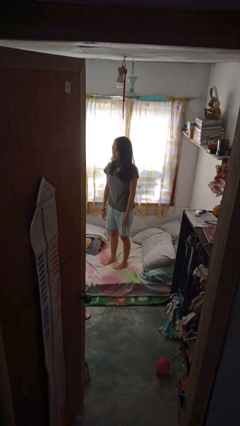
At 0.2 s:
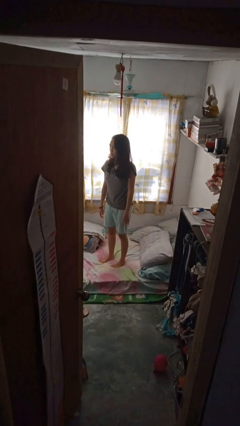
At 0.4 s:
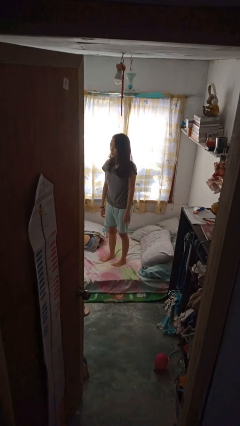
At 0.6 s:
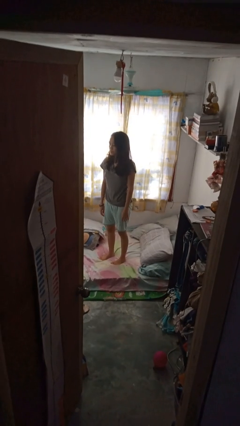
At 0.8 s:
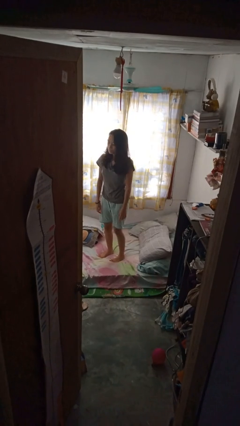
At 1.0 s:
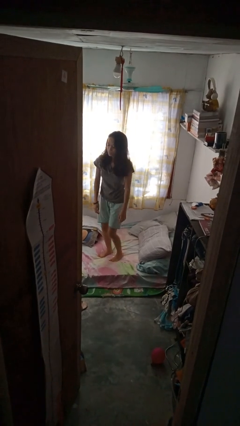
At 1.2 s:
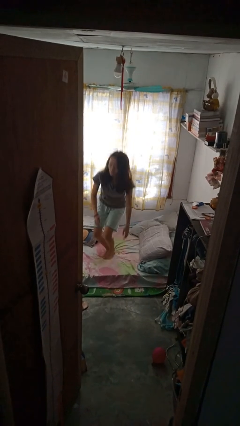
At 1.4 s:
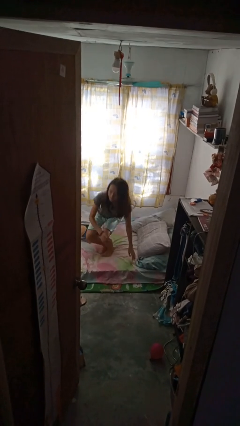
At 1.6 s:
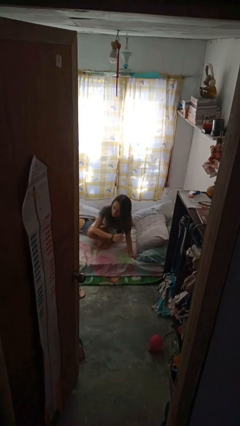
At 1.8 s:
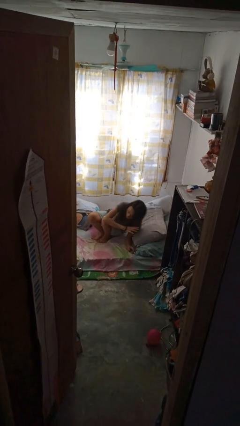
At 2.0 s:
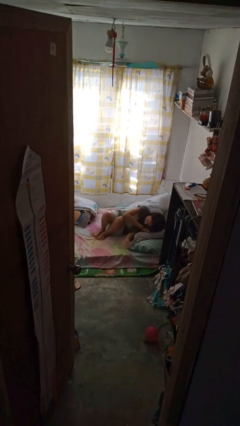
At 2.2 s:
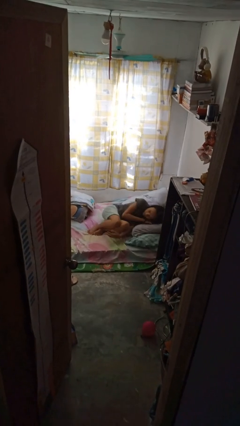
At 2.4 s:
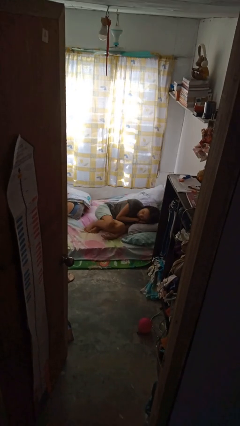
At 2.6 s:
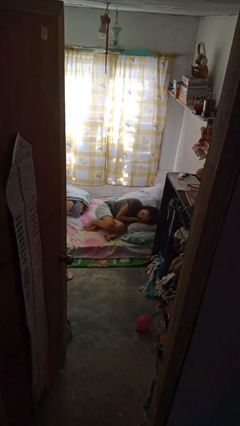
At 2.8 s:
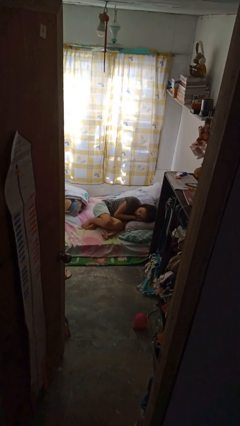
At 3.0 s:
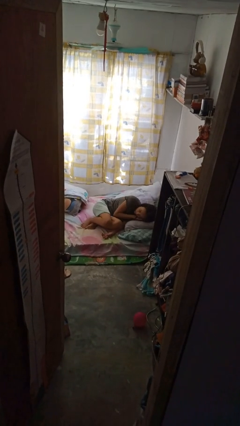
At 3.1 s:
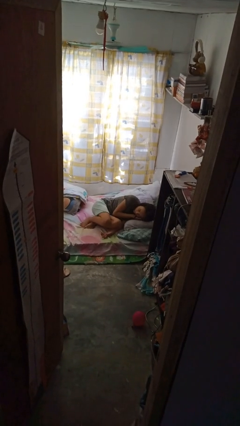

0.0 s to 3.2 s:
person lies down on bed

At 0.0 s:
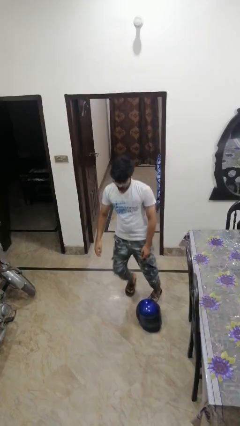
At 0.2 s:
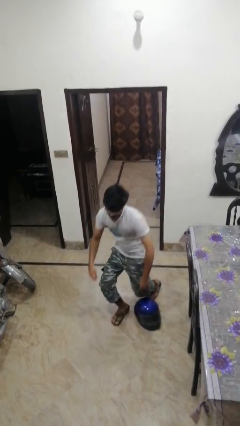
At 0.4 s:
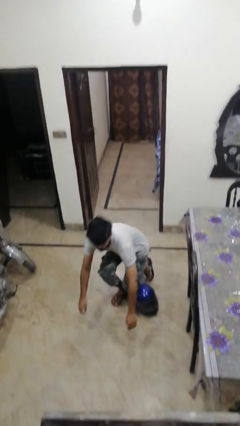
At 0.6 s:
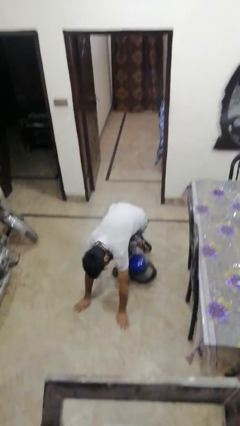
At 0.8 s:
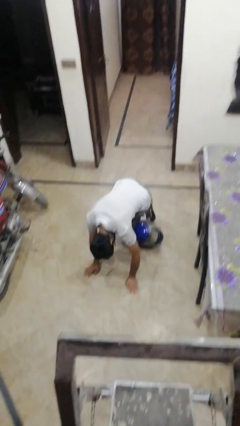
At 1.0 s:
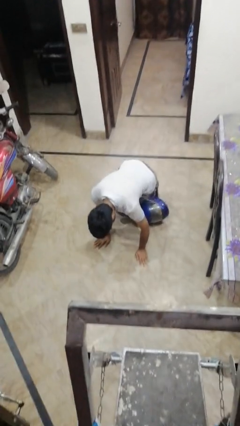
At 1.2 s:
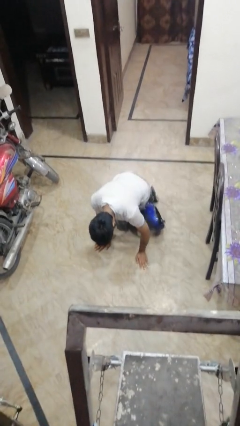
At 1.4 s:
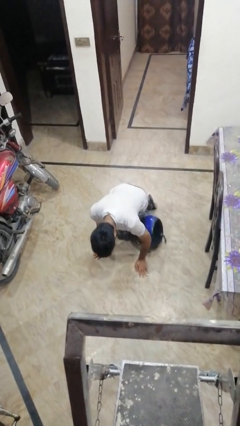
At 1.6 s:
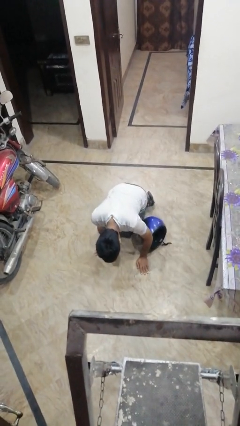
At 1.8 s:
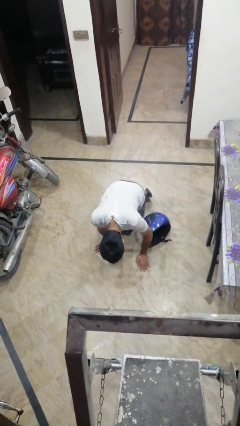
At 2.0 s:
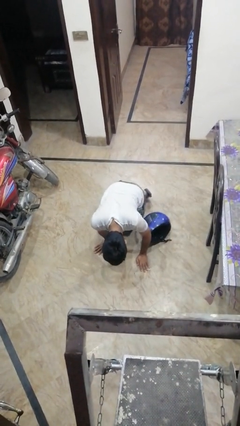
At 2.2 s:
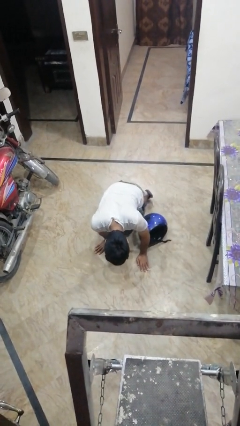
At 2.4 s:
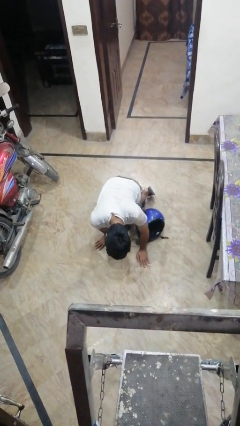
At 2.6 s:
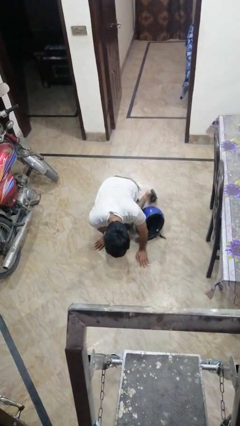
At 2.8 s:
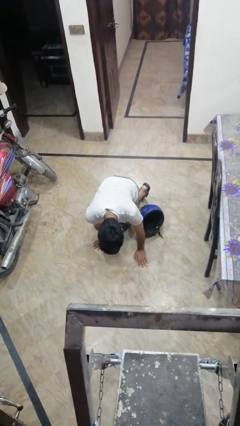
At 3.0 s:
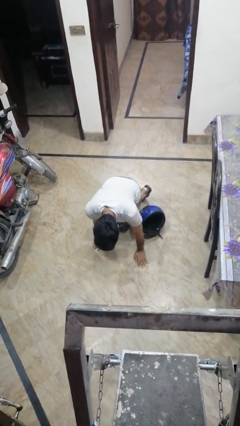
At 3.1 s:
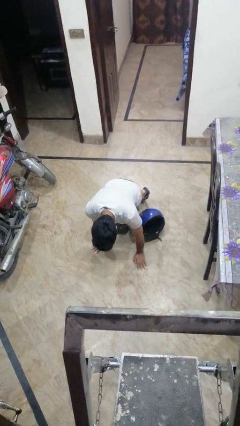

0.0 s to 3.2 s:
person trips on object on floor

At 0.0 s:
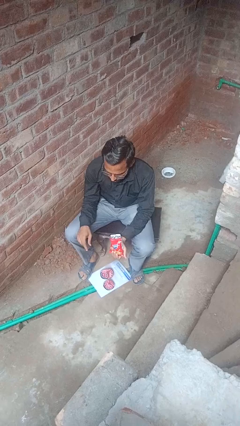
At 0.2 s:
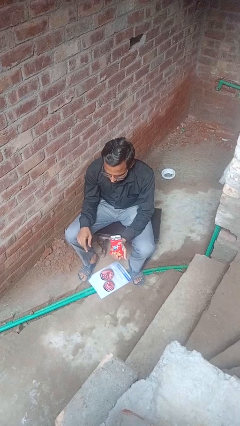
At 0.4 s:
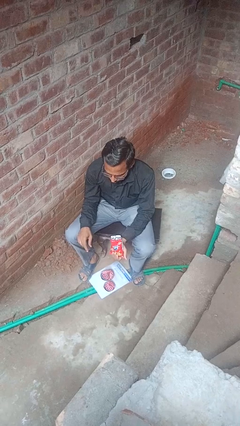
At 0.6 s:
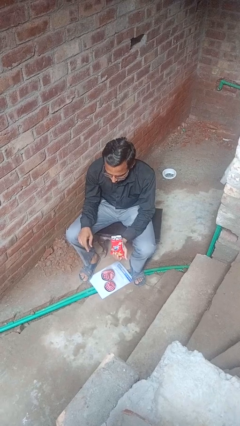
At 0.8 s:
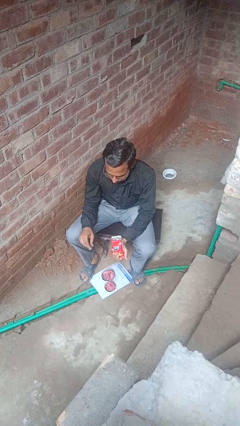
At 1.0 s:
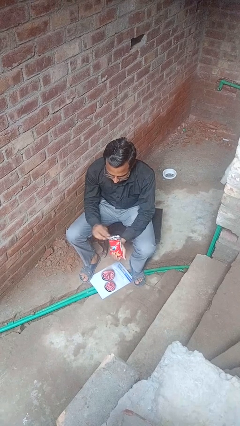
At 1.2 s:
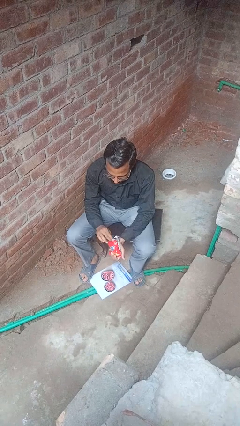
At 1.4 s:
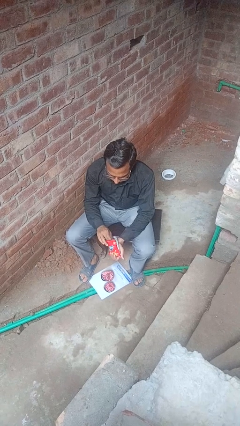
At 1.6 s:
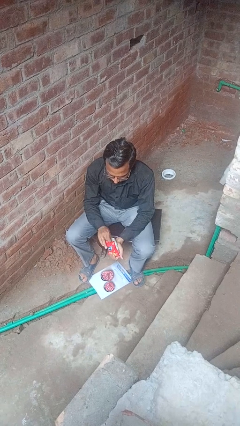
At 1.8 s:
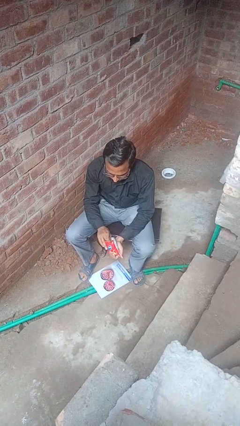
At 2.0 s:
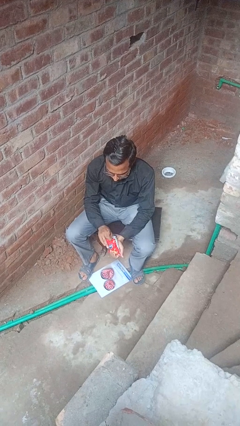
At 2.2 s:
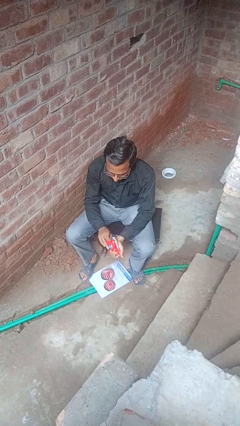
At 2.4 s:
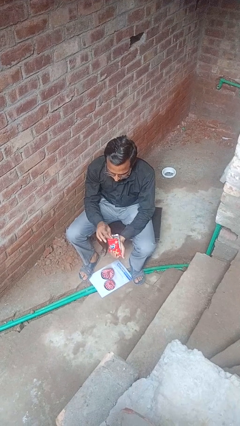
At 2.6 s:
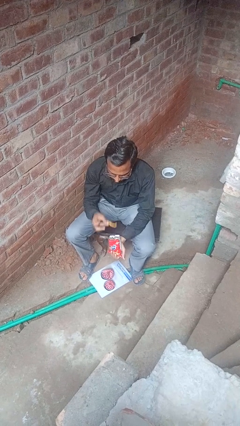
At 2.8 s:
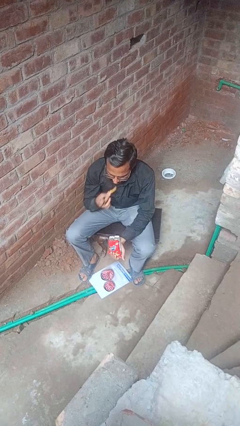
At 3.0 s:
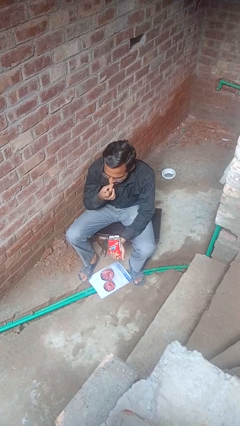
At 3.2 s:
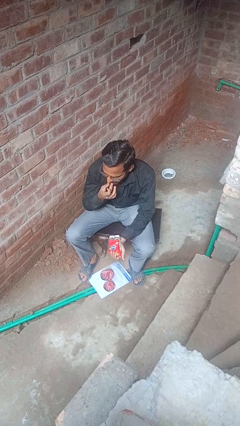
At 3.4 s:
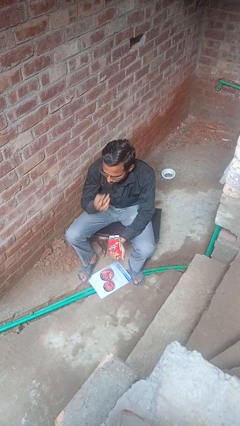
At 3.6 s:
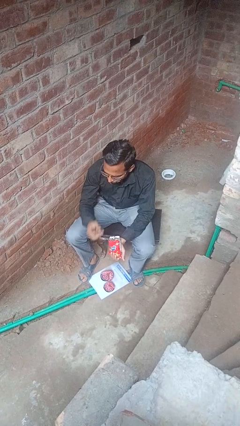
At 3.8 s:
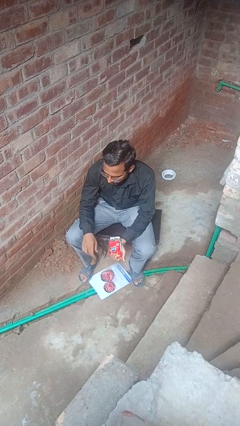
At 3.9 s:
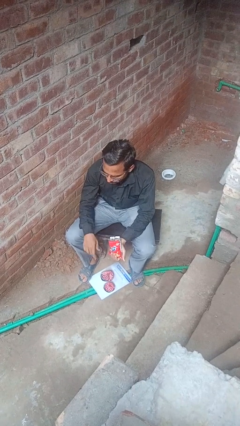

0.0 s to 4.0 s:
person eats snack from bag

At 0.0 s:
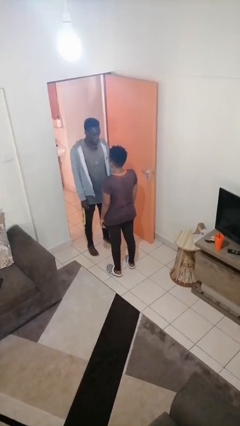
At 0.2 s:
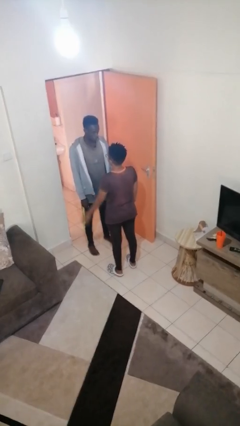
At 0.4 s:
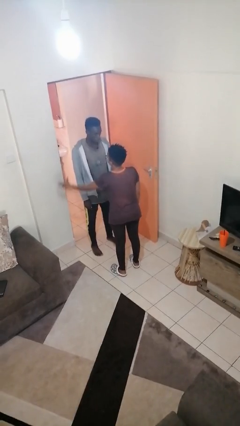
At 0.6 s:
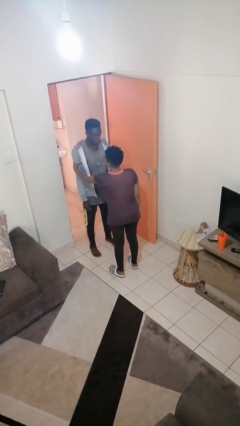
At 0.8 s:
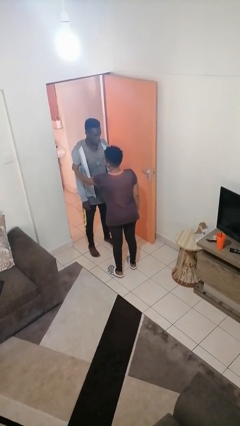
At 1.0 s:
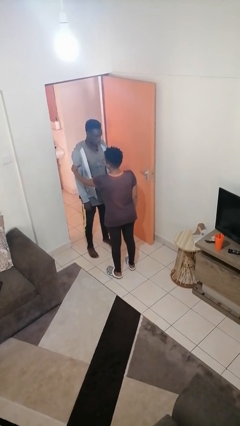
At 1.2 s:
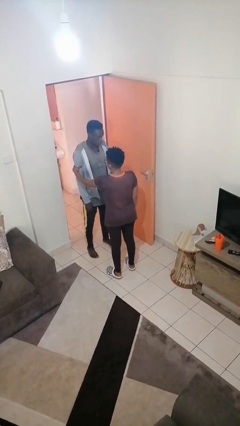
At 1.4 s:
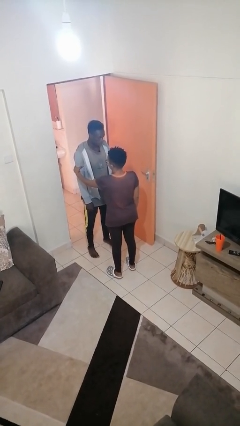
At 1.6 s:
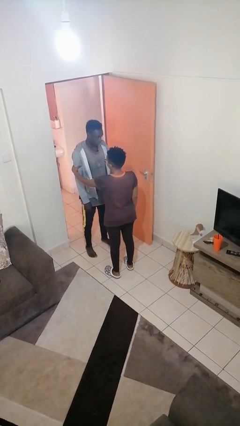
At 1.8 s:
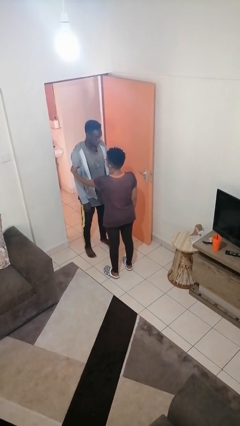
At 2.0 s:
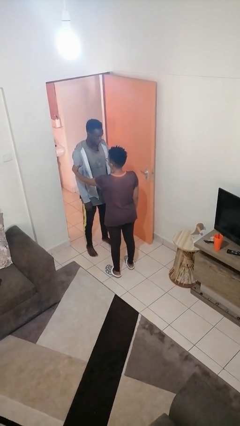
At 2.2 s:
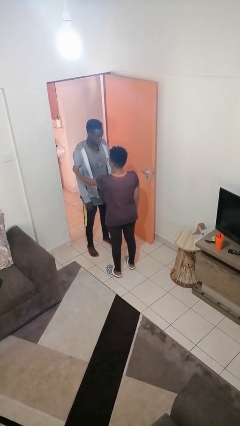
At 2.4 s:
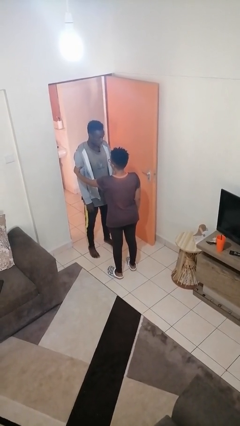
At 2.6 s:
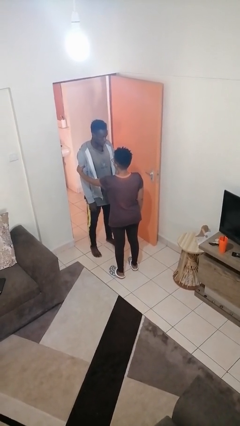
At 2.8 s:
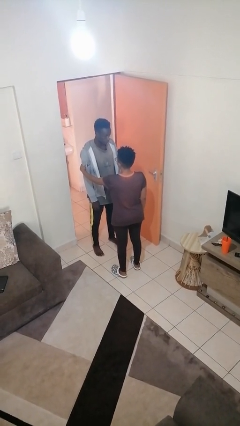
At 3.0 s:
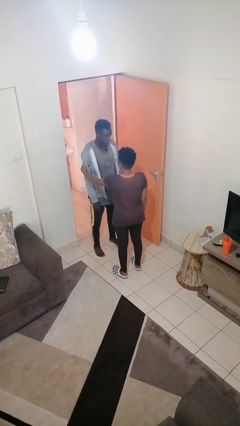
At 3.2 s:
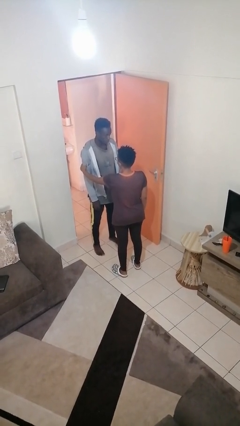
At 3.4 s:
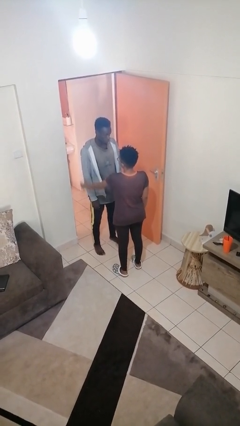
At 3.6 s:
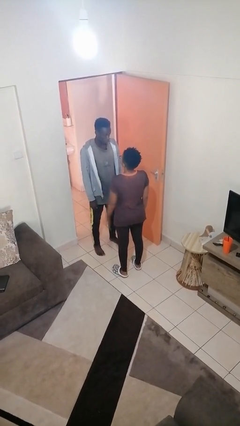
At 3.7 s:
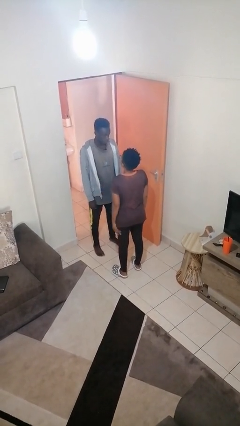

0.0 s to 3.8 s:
person grabs person by bicep

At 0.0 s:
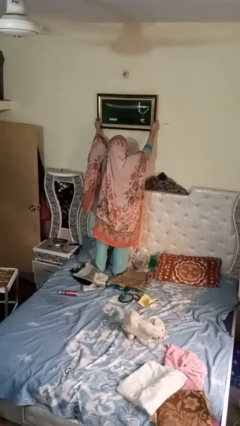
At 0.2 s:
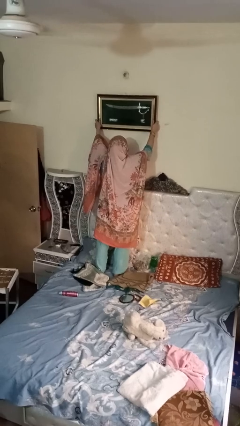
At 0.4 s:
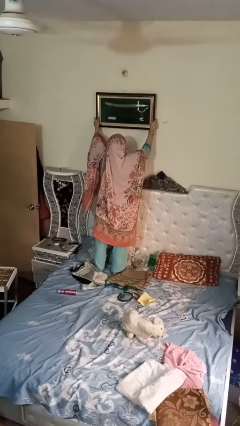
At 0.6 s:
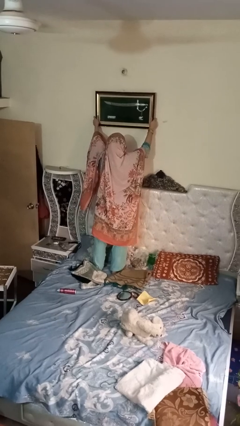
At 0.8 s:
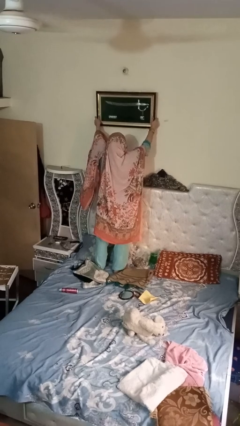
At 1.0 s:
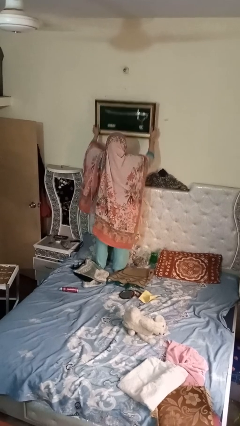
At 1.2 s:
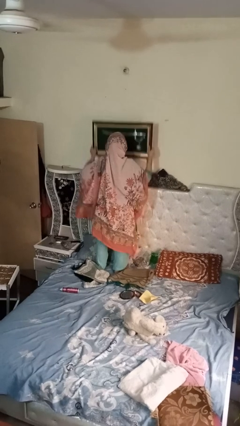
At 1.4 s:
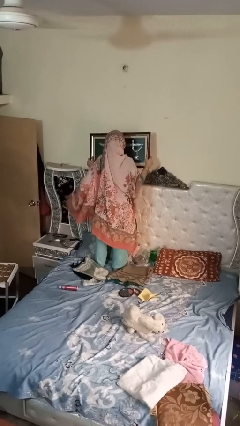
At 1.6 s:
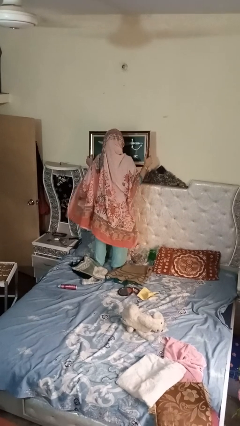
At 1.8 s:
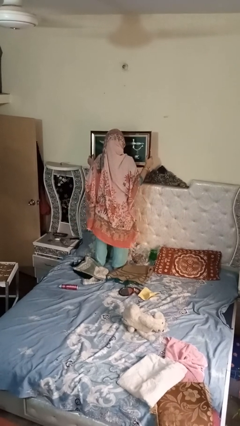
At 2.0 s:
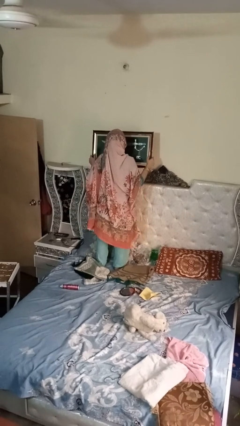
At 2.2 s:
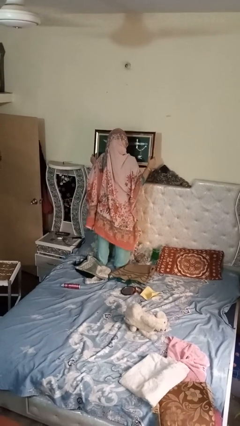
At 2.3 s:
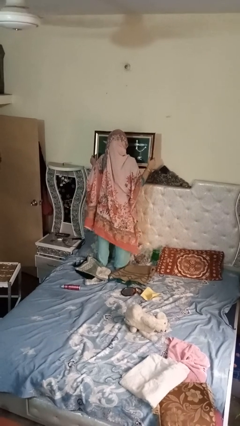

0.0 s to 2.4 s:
person puts up picture frame

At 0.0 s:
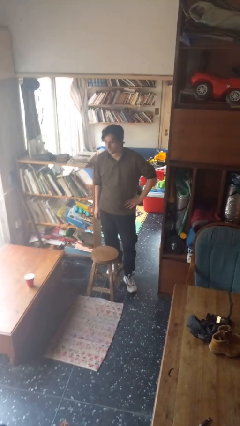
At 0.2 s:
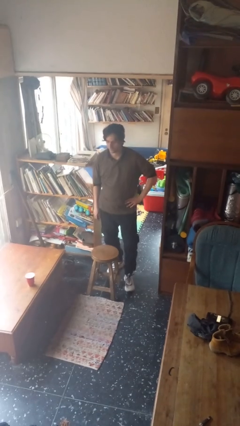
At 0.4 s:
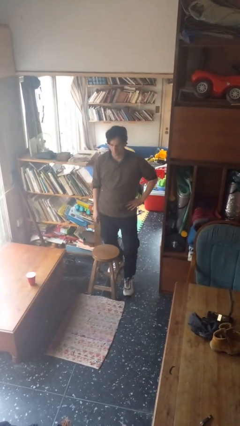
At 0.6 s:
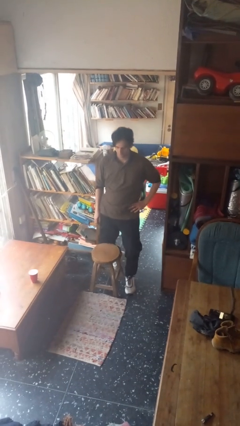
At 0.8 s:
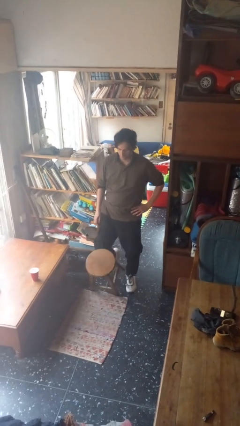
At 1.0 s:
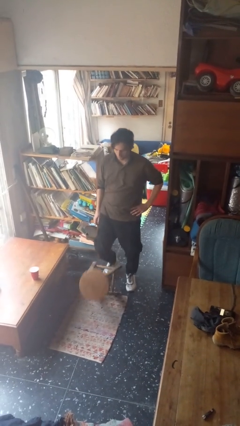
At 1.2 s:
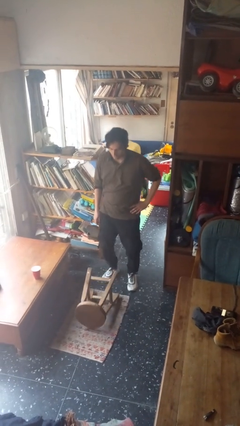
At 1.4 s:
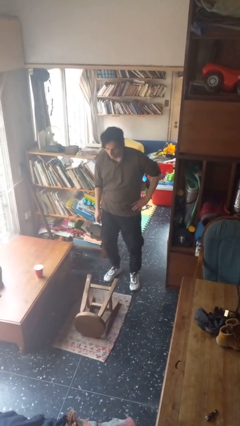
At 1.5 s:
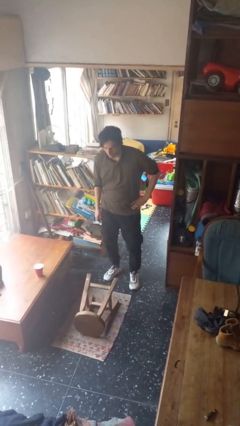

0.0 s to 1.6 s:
person knocks over furniture
